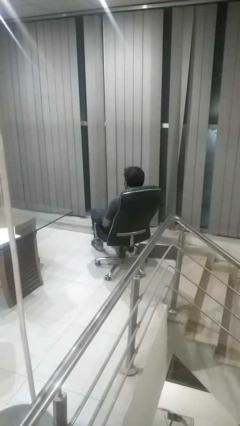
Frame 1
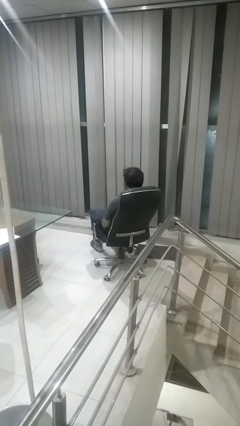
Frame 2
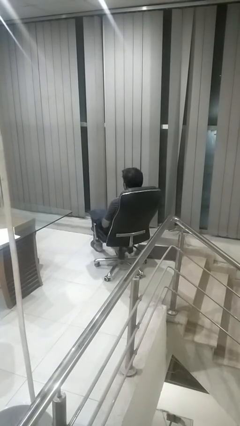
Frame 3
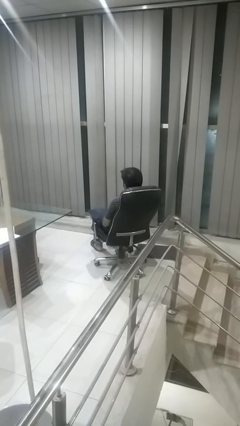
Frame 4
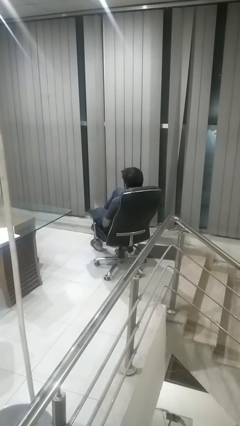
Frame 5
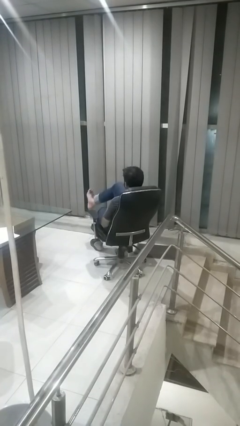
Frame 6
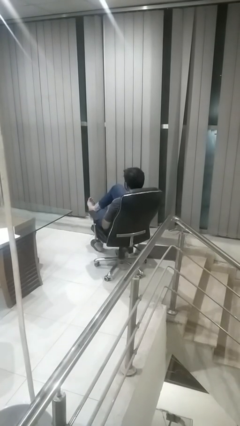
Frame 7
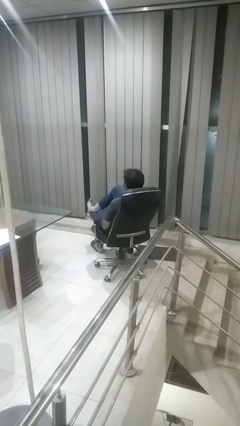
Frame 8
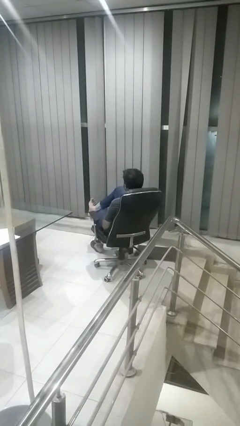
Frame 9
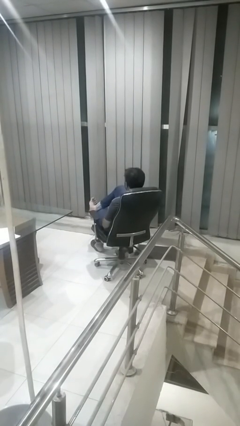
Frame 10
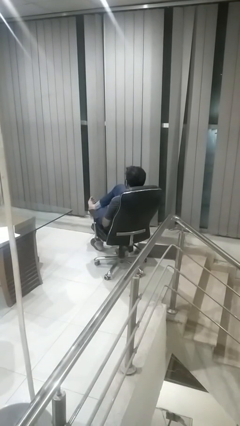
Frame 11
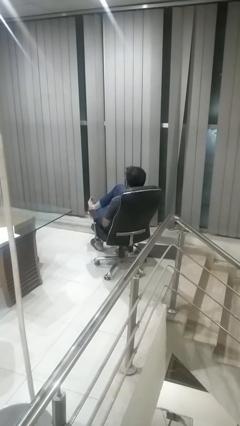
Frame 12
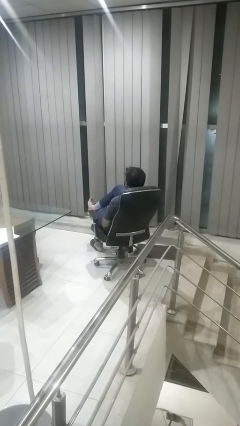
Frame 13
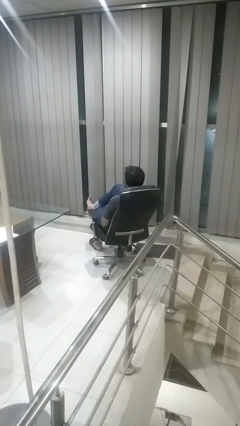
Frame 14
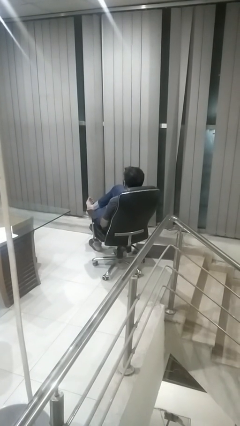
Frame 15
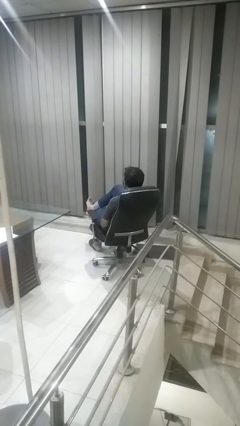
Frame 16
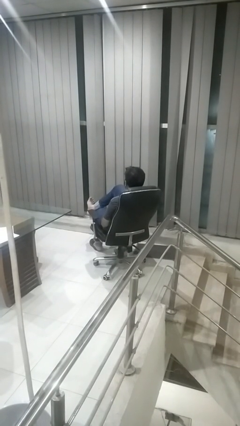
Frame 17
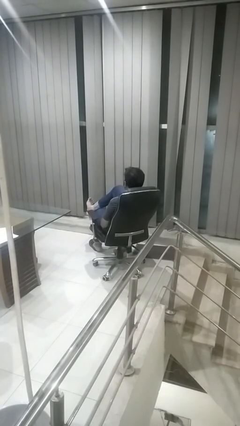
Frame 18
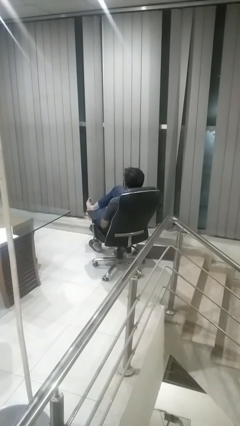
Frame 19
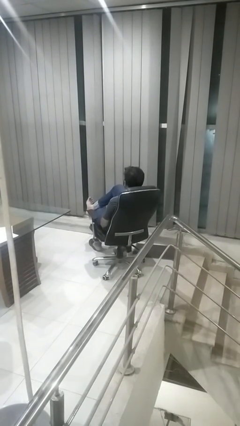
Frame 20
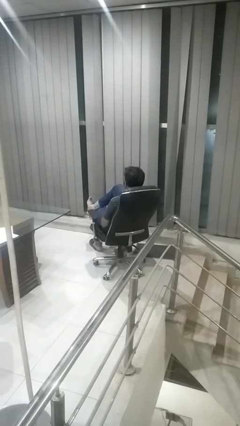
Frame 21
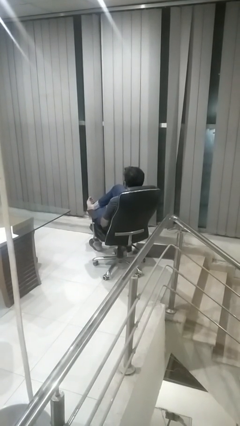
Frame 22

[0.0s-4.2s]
person crosses legs

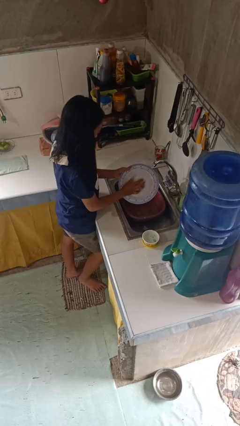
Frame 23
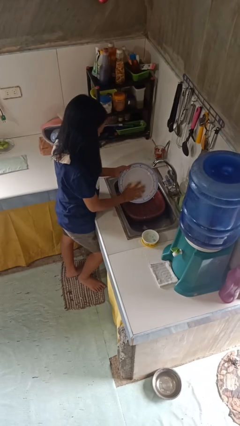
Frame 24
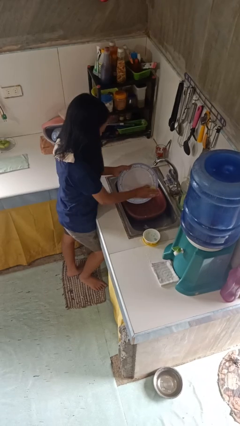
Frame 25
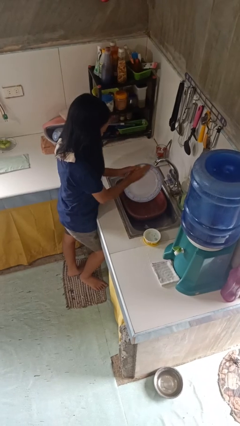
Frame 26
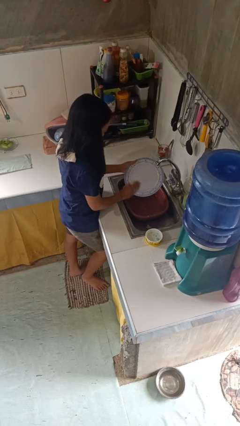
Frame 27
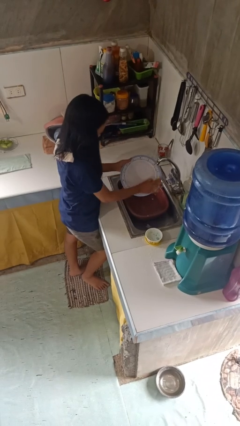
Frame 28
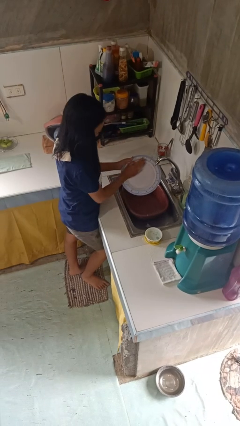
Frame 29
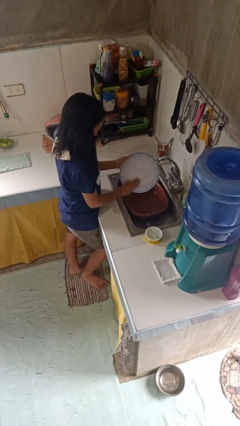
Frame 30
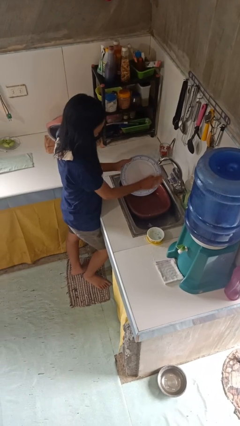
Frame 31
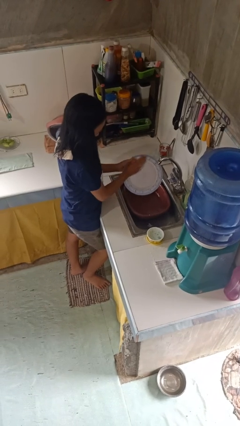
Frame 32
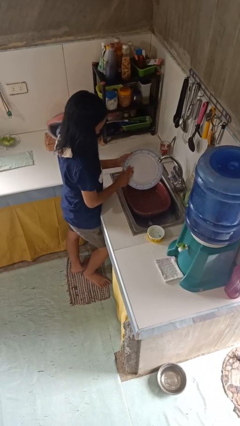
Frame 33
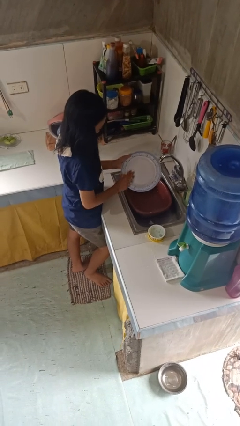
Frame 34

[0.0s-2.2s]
person washes dish

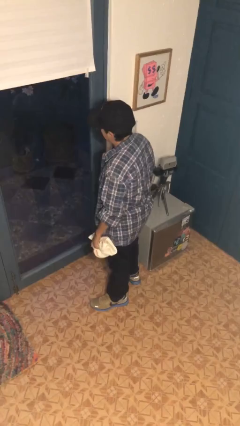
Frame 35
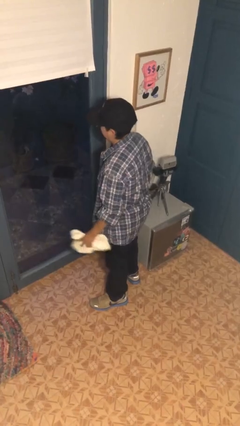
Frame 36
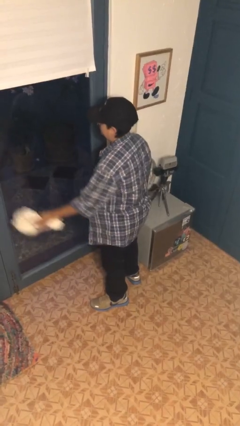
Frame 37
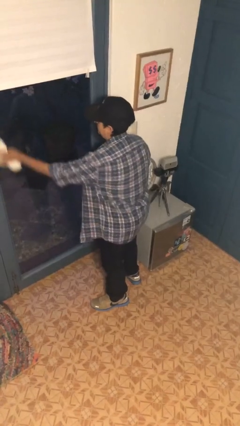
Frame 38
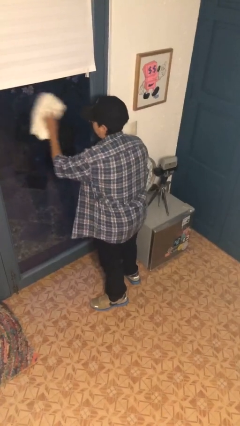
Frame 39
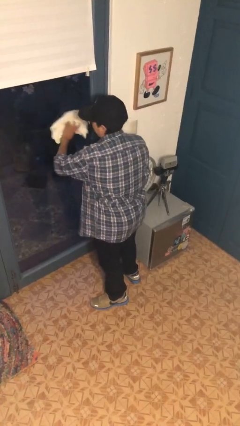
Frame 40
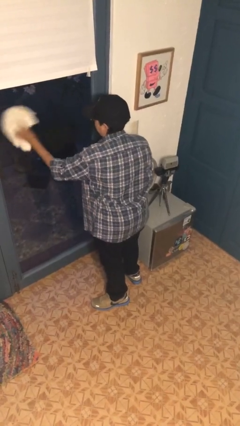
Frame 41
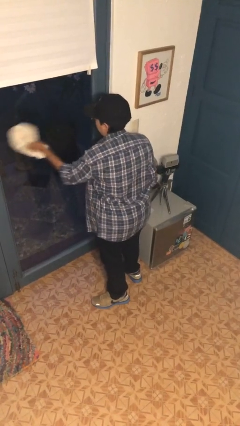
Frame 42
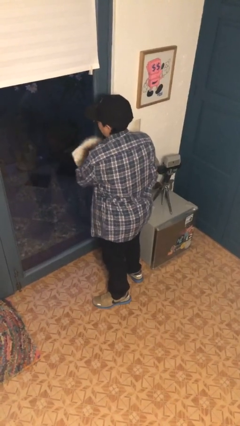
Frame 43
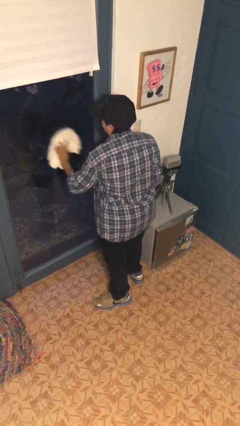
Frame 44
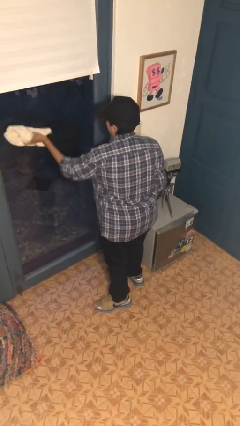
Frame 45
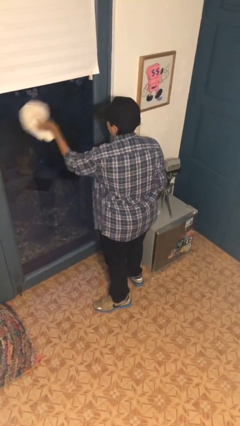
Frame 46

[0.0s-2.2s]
person washes window

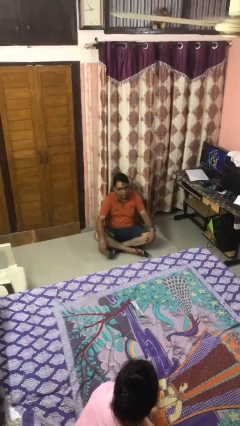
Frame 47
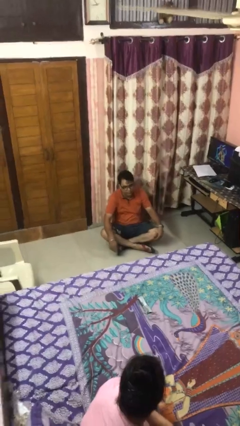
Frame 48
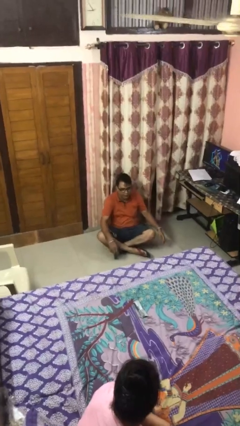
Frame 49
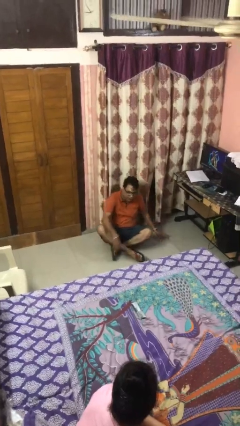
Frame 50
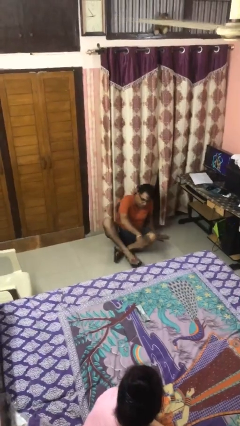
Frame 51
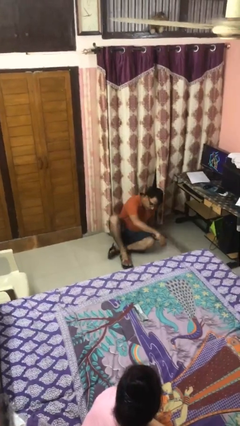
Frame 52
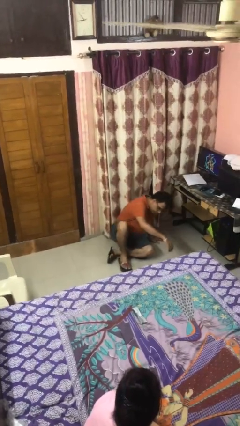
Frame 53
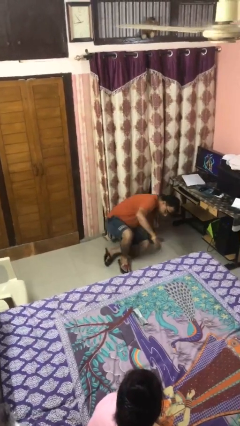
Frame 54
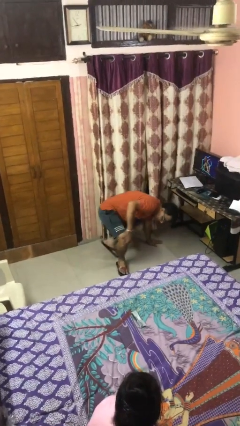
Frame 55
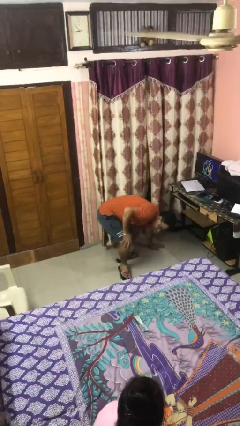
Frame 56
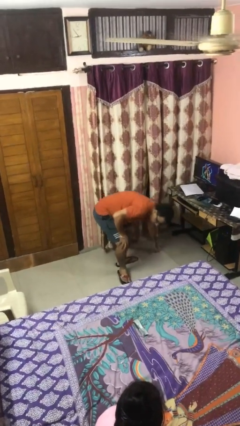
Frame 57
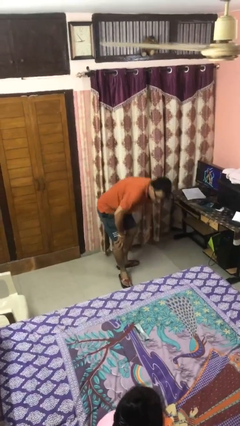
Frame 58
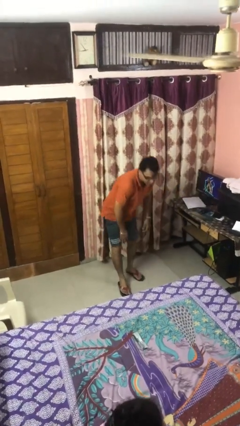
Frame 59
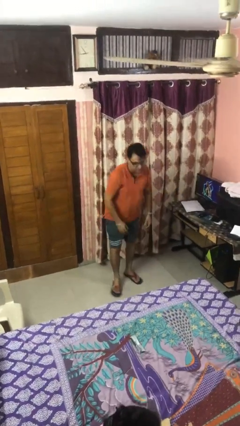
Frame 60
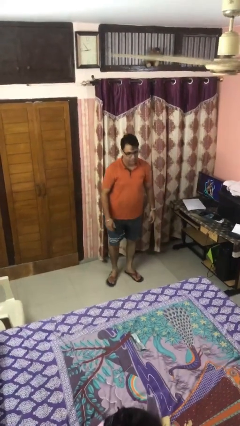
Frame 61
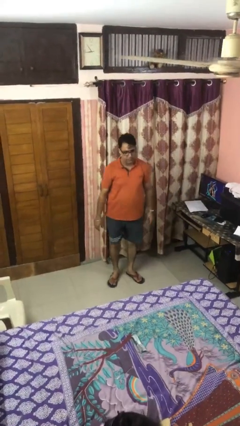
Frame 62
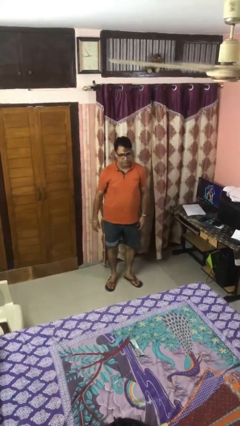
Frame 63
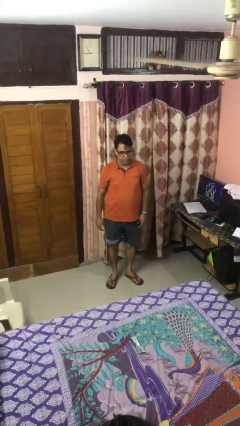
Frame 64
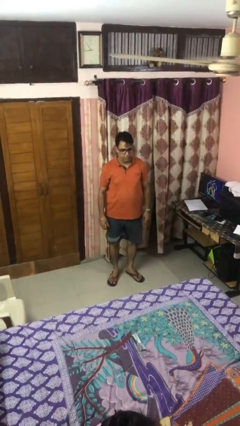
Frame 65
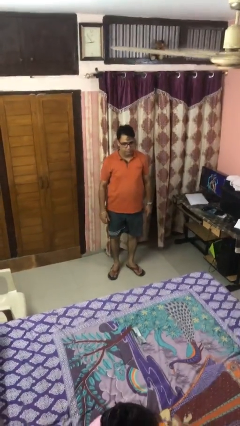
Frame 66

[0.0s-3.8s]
person stands up from floor

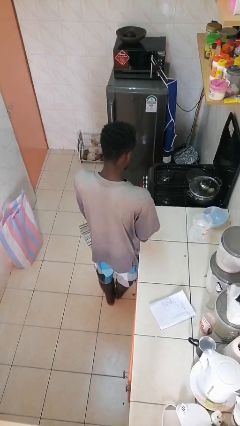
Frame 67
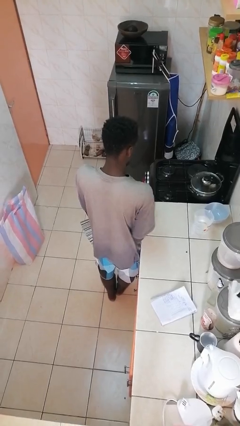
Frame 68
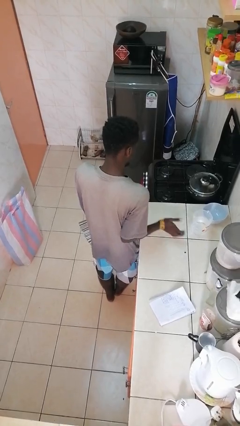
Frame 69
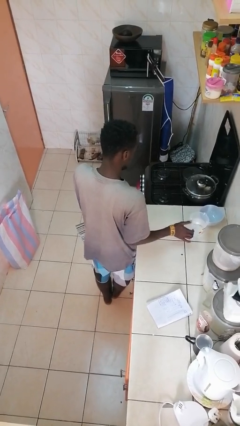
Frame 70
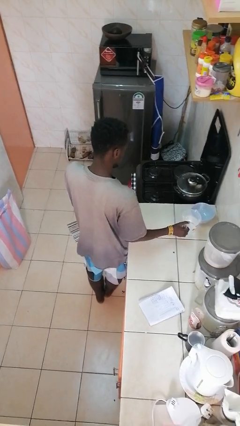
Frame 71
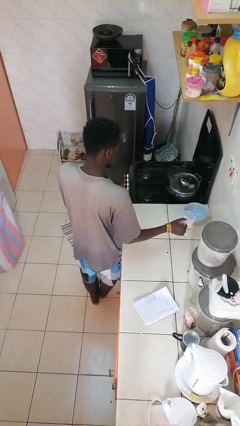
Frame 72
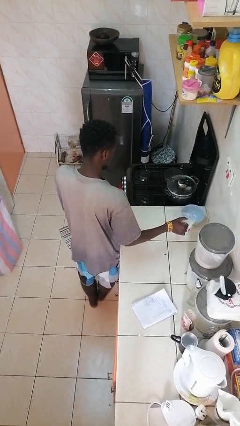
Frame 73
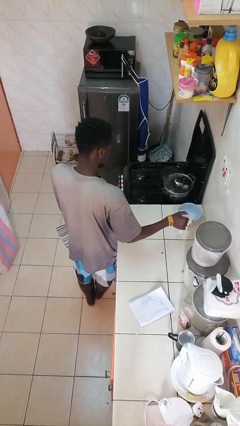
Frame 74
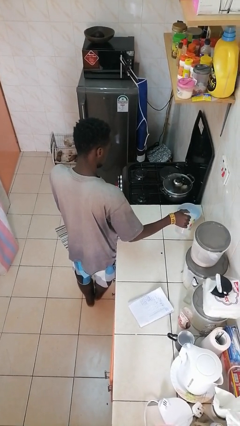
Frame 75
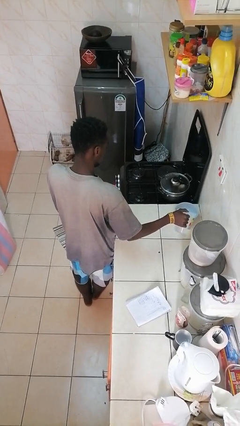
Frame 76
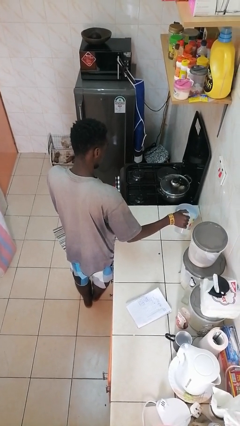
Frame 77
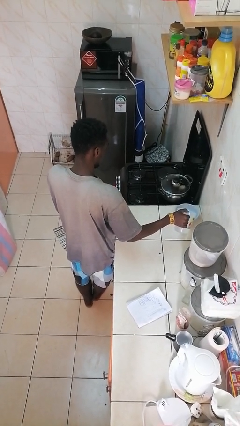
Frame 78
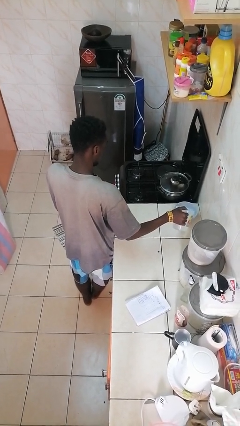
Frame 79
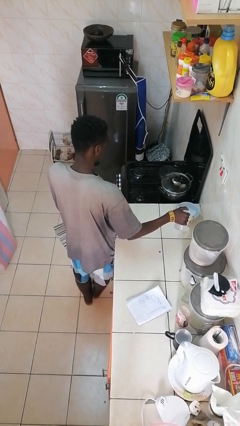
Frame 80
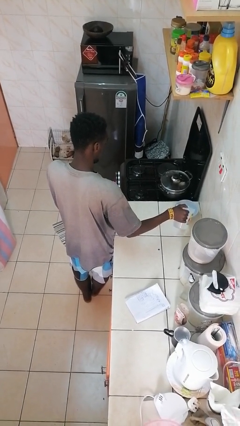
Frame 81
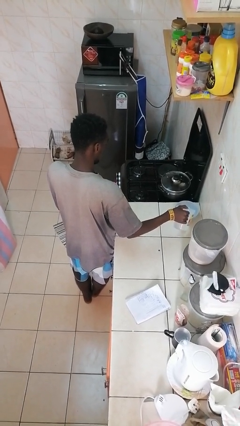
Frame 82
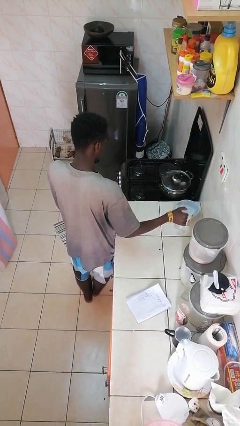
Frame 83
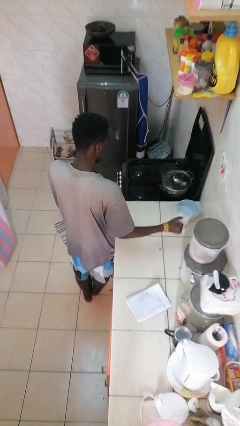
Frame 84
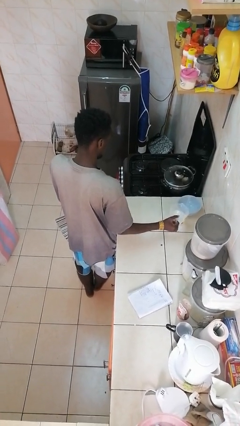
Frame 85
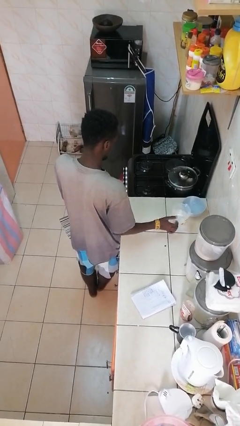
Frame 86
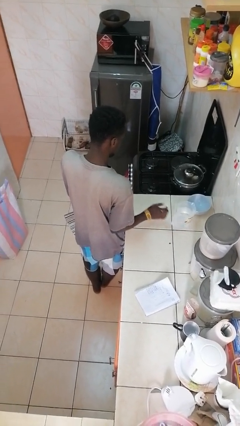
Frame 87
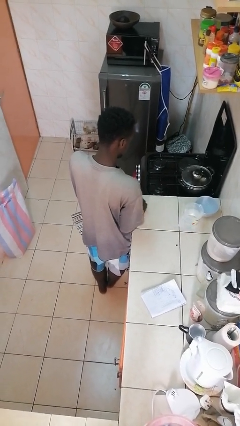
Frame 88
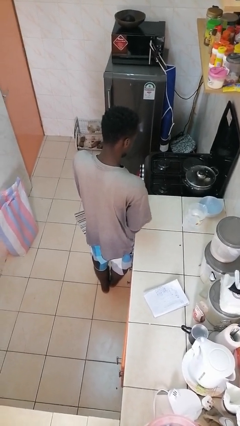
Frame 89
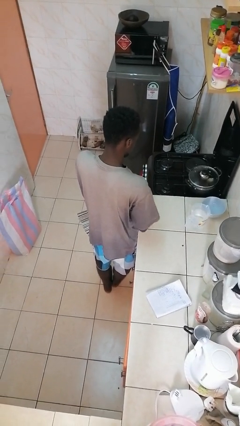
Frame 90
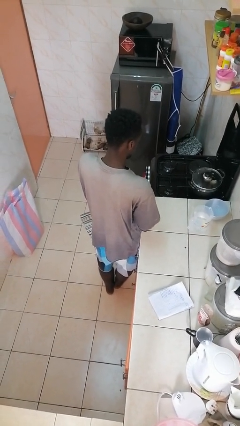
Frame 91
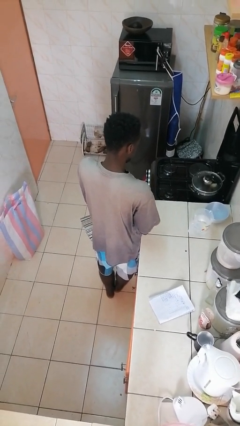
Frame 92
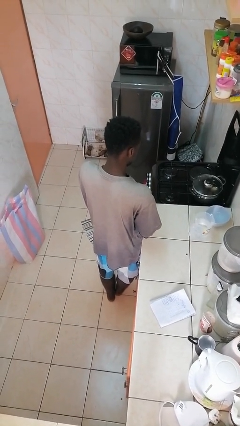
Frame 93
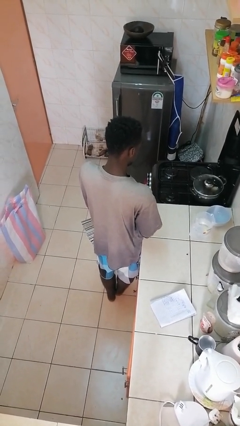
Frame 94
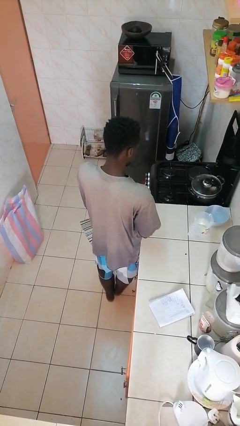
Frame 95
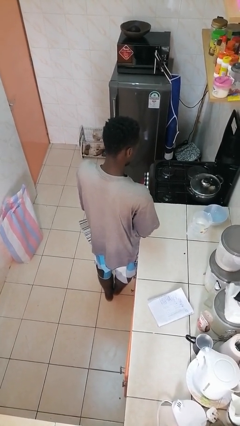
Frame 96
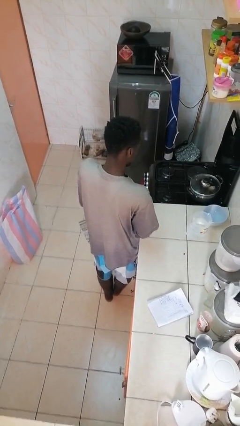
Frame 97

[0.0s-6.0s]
person pours into bowl
